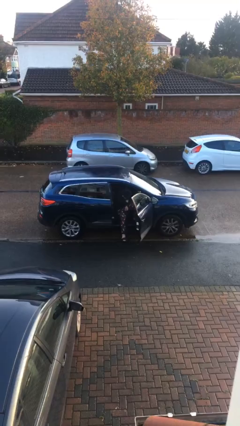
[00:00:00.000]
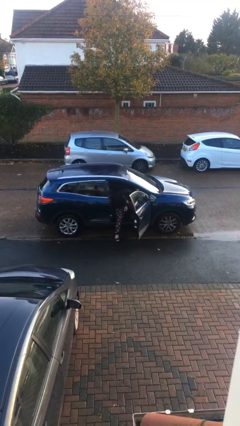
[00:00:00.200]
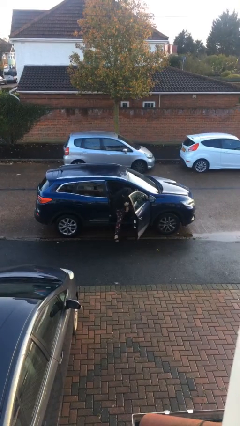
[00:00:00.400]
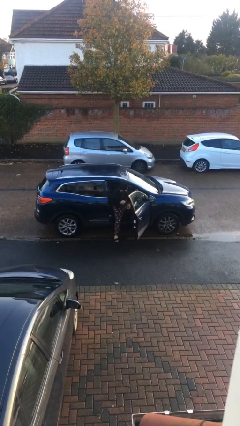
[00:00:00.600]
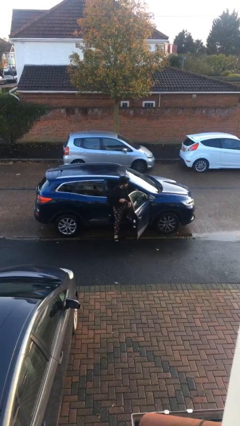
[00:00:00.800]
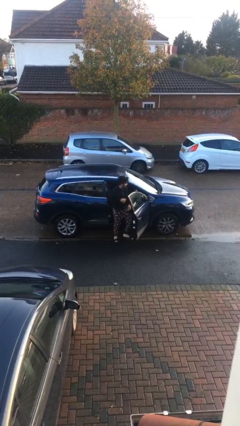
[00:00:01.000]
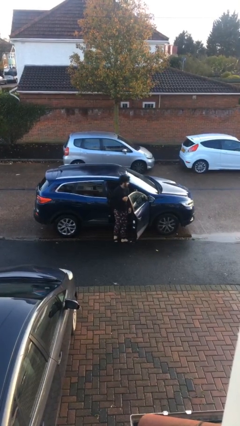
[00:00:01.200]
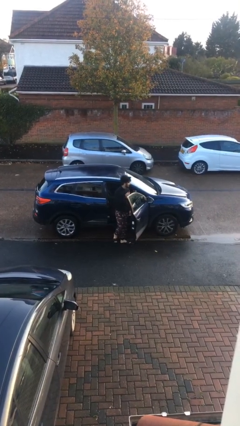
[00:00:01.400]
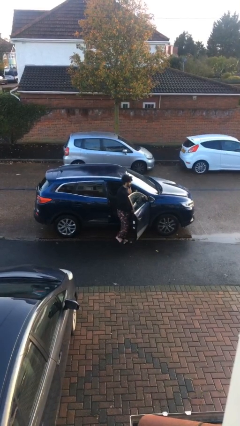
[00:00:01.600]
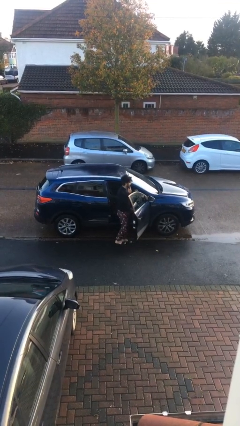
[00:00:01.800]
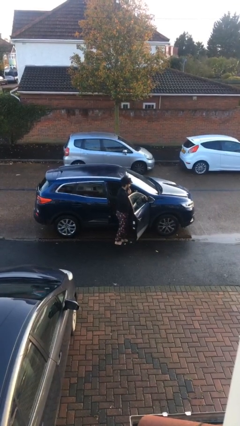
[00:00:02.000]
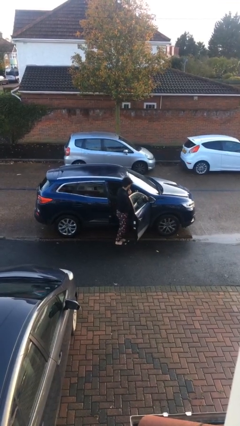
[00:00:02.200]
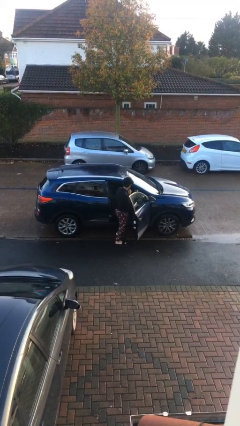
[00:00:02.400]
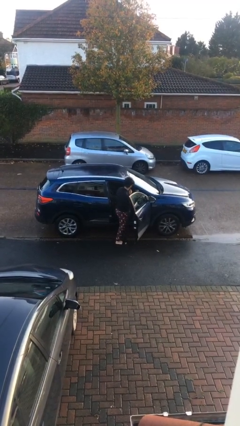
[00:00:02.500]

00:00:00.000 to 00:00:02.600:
person exits car

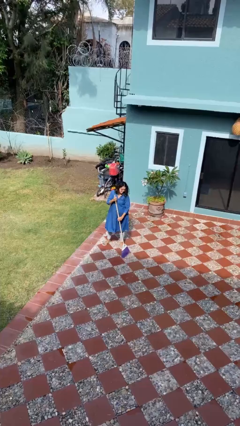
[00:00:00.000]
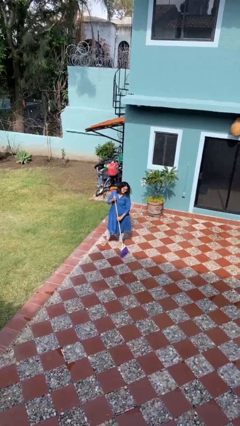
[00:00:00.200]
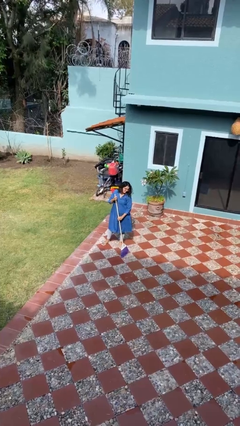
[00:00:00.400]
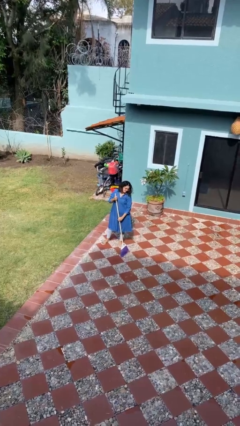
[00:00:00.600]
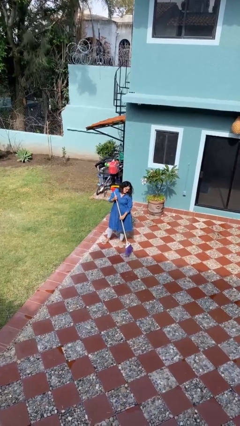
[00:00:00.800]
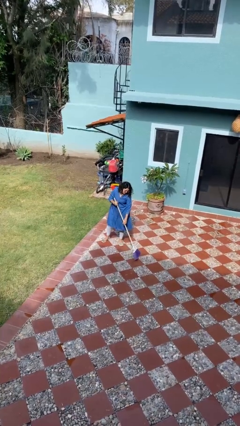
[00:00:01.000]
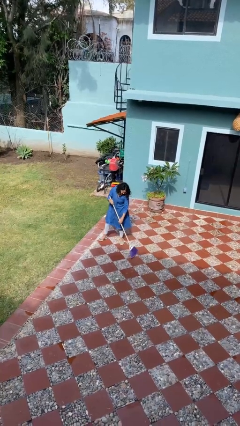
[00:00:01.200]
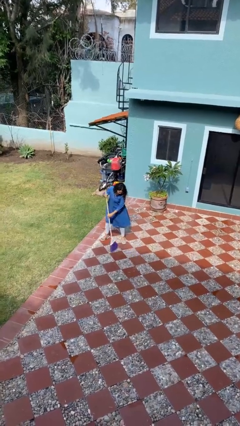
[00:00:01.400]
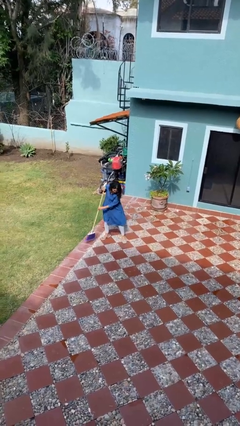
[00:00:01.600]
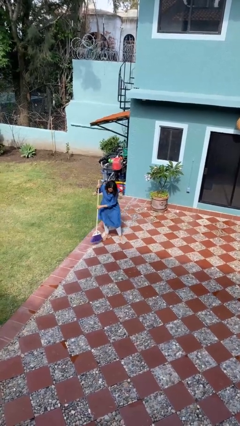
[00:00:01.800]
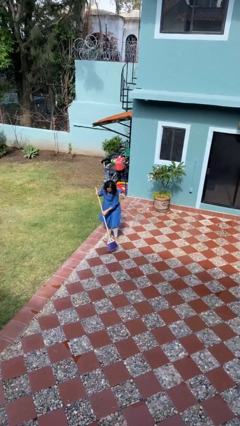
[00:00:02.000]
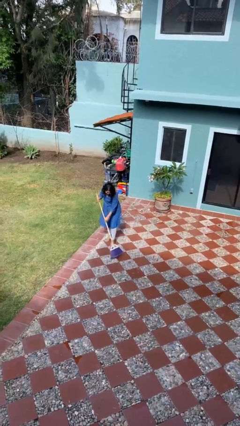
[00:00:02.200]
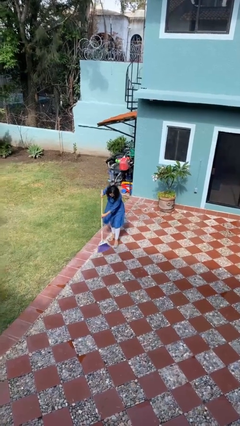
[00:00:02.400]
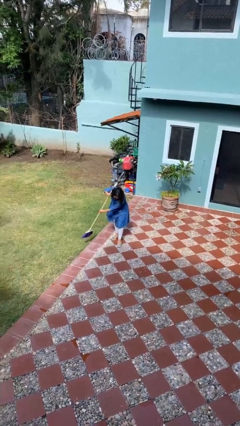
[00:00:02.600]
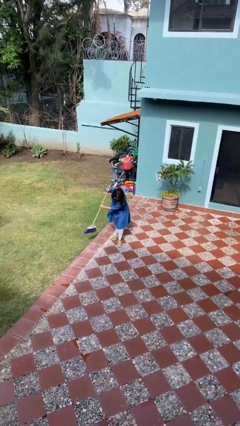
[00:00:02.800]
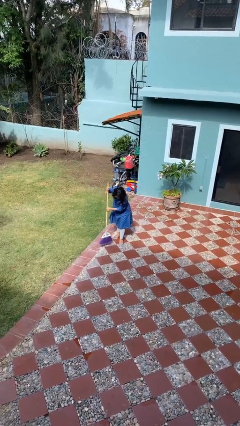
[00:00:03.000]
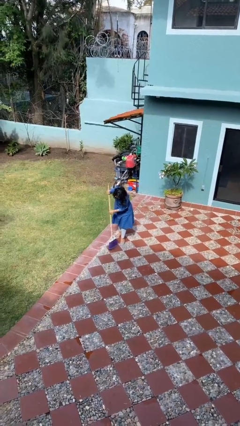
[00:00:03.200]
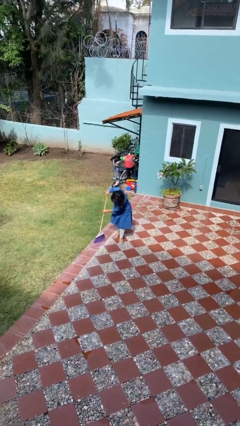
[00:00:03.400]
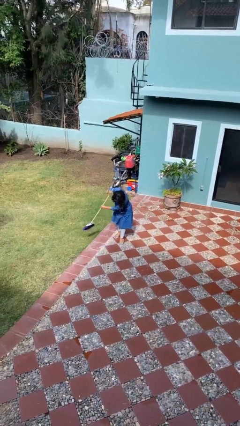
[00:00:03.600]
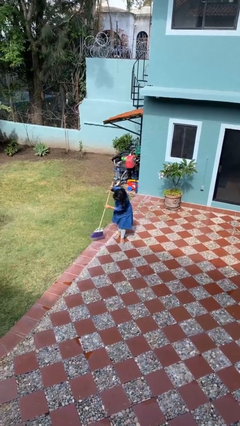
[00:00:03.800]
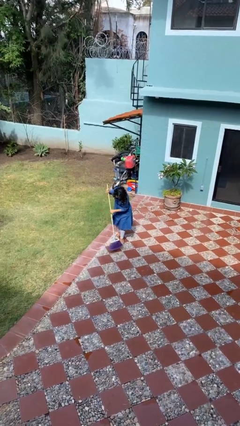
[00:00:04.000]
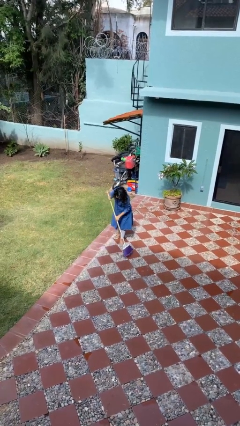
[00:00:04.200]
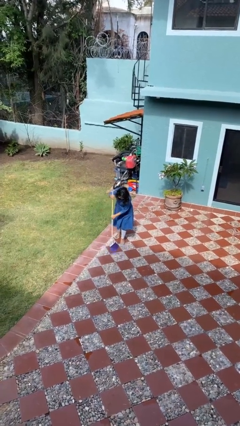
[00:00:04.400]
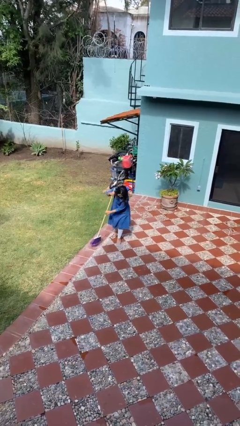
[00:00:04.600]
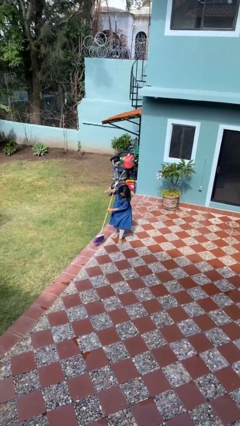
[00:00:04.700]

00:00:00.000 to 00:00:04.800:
person sweeps floor

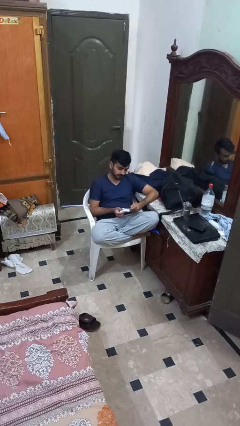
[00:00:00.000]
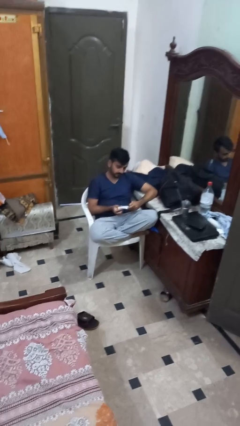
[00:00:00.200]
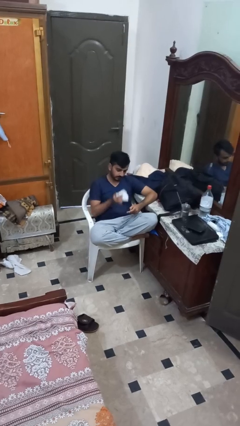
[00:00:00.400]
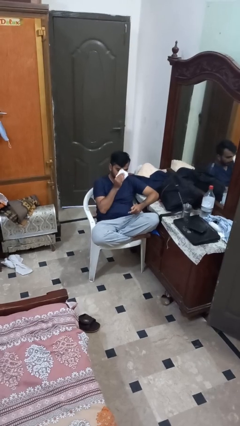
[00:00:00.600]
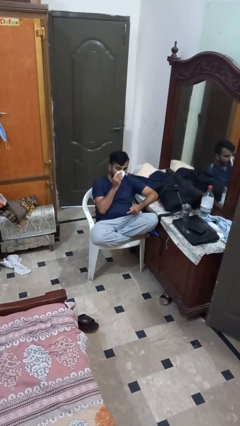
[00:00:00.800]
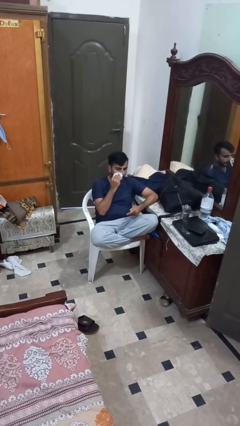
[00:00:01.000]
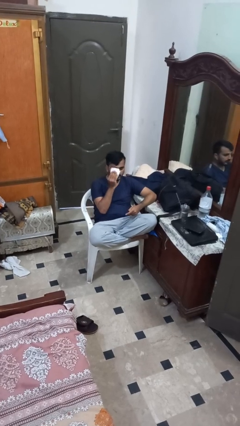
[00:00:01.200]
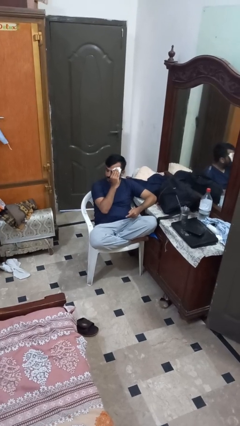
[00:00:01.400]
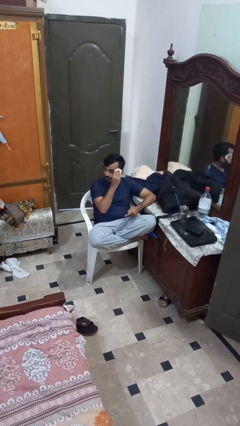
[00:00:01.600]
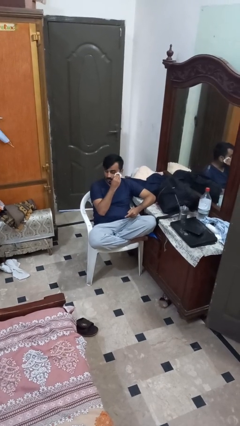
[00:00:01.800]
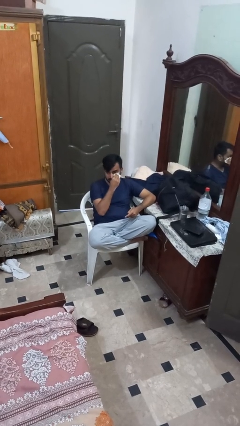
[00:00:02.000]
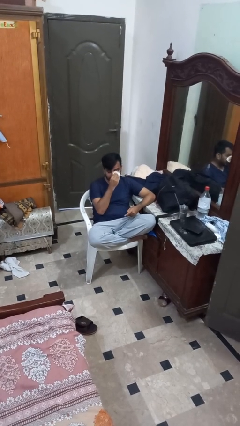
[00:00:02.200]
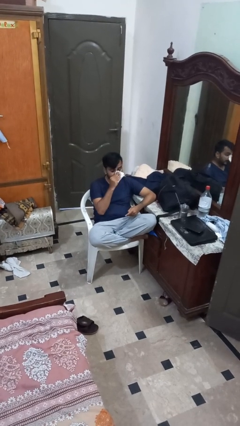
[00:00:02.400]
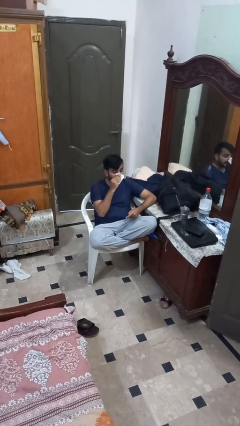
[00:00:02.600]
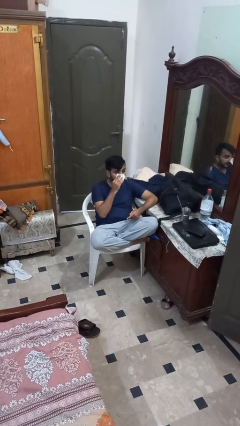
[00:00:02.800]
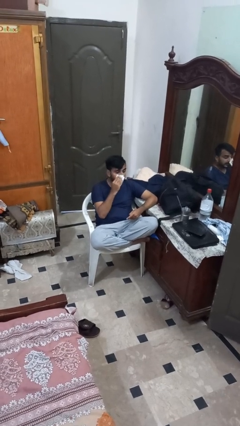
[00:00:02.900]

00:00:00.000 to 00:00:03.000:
person wipes mouth with napkin

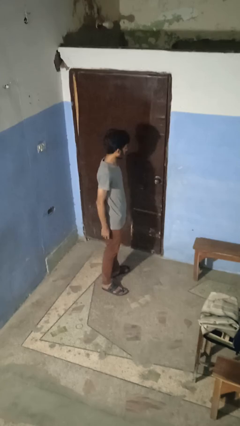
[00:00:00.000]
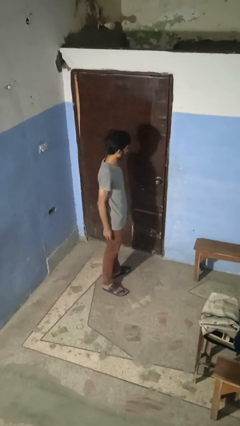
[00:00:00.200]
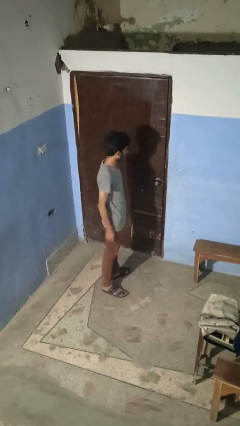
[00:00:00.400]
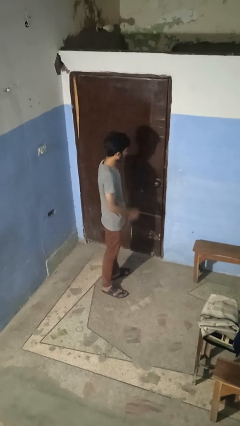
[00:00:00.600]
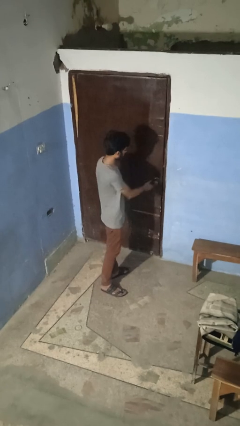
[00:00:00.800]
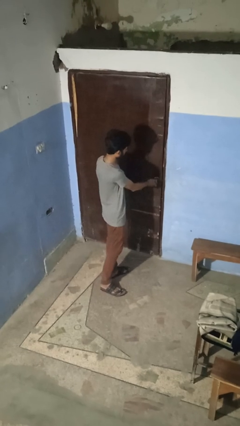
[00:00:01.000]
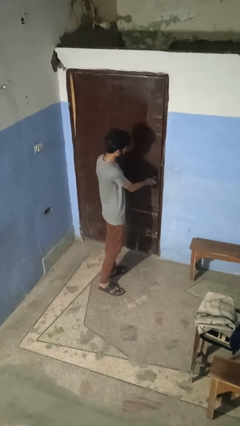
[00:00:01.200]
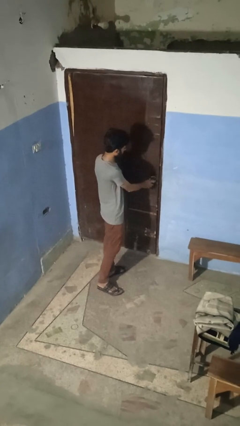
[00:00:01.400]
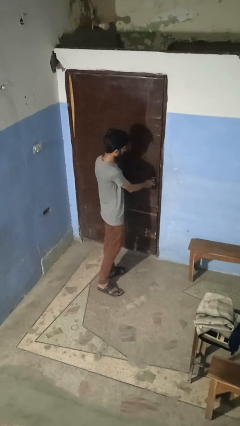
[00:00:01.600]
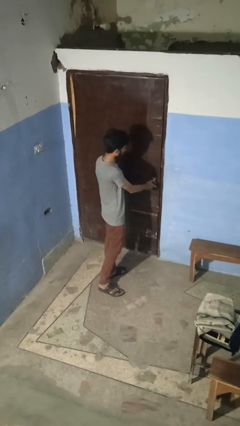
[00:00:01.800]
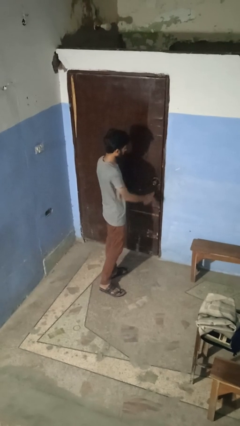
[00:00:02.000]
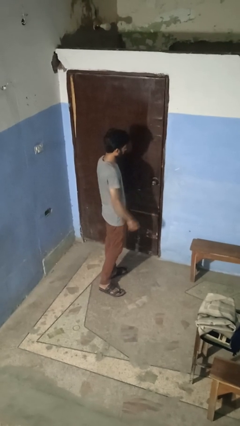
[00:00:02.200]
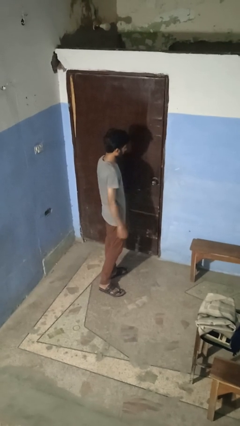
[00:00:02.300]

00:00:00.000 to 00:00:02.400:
person unlocks door with keys

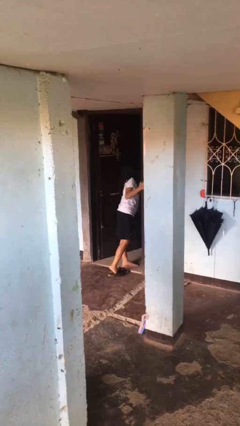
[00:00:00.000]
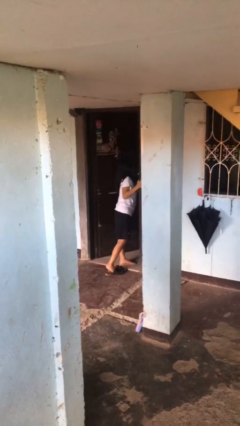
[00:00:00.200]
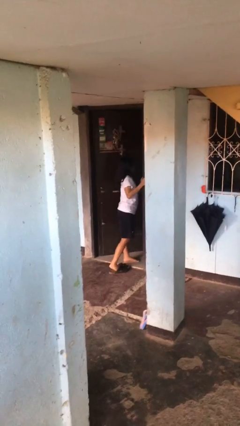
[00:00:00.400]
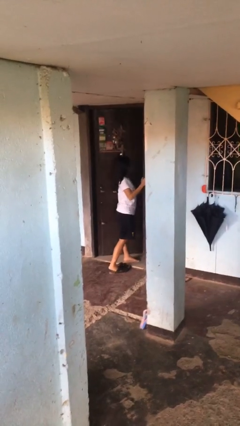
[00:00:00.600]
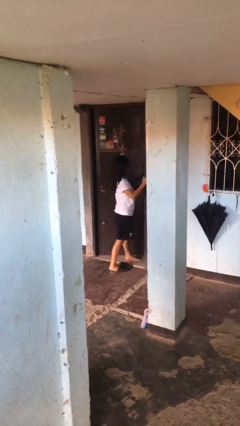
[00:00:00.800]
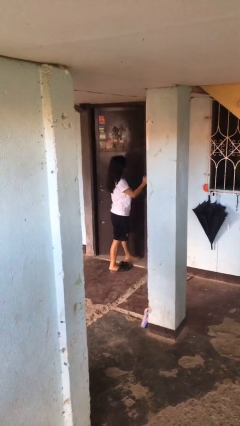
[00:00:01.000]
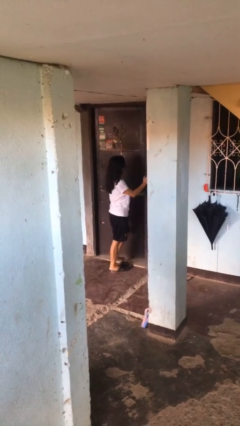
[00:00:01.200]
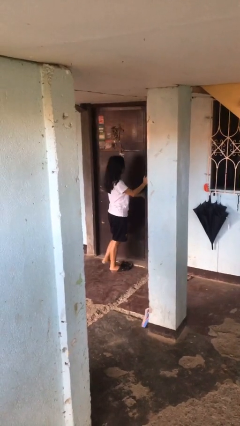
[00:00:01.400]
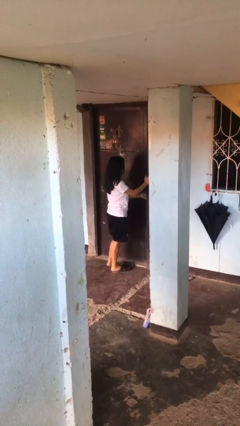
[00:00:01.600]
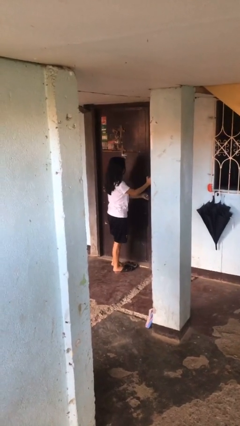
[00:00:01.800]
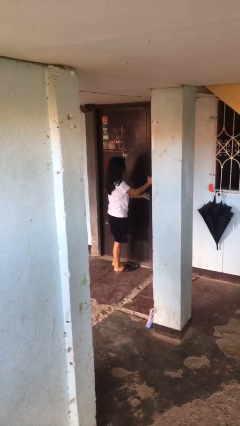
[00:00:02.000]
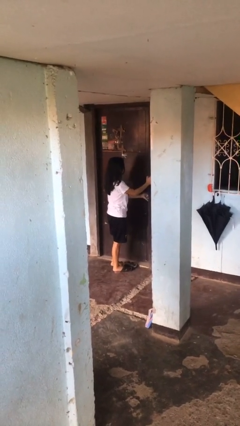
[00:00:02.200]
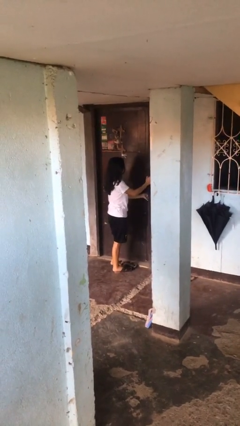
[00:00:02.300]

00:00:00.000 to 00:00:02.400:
person closes facility door

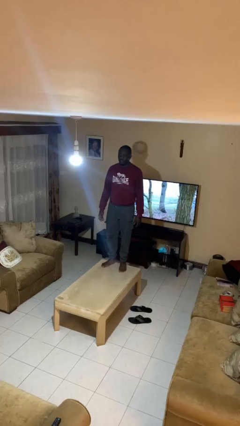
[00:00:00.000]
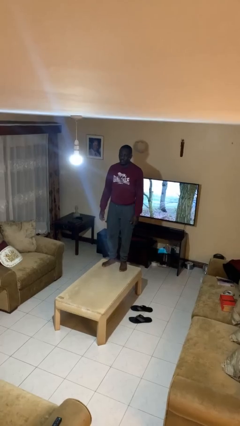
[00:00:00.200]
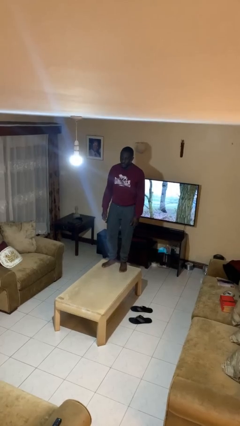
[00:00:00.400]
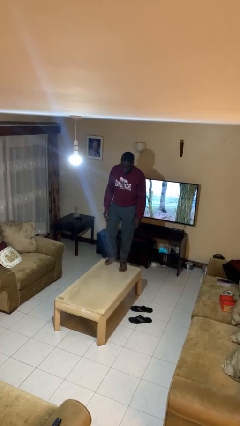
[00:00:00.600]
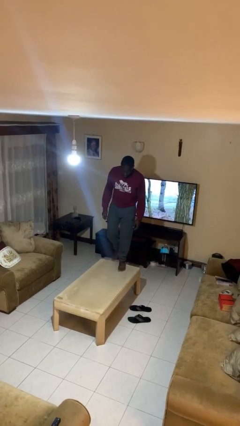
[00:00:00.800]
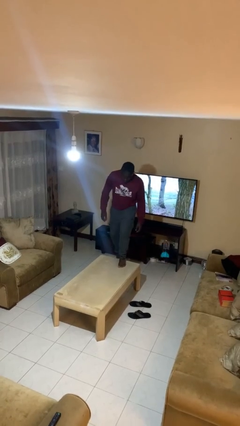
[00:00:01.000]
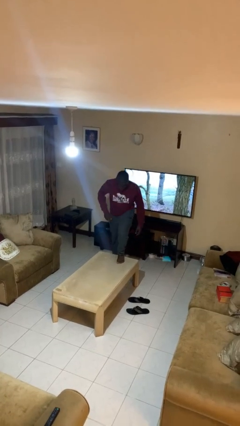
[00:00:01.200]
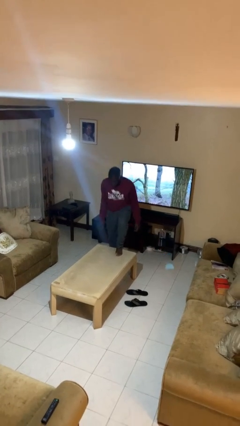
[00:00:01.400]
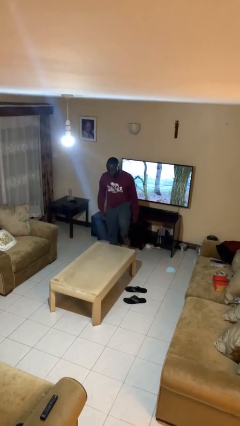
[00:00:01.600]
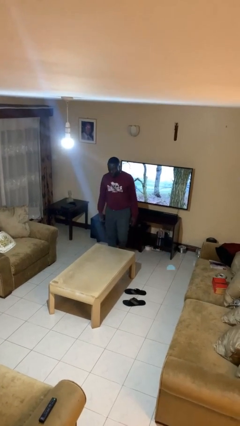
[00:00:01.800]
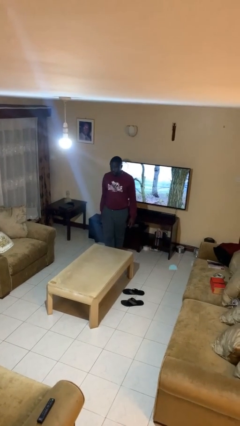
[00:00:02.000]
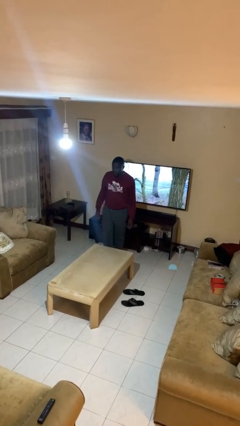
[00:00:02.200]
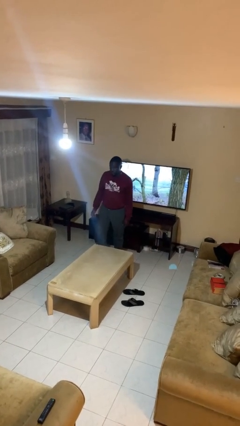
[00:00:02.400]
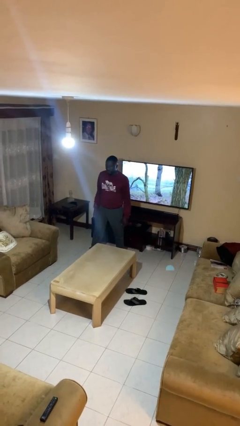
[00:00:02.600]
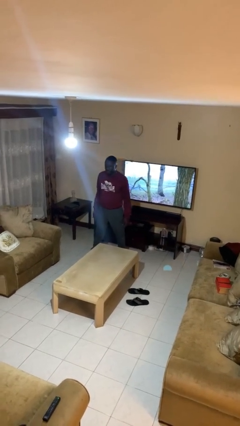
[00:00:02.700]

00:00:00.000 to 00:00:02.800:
person climbs off table
